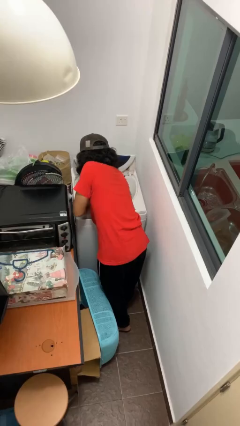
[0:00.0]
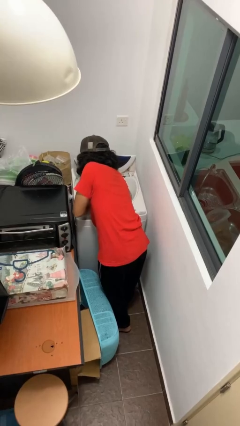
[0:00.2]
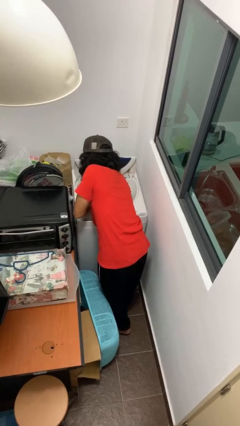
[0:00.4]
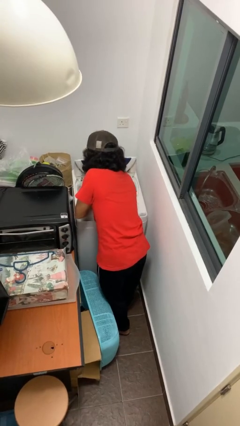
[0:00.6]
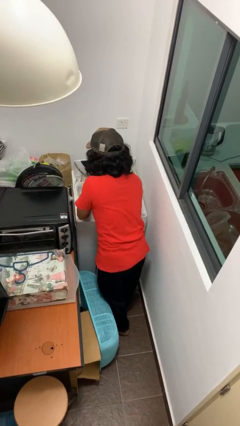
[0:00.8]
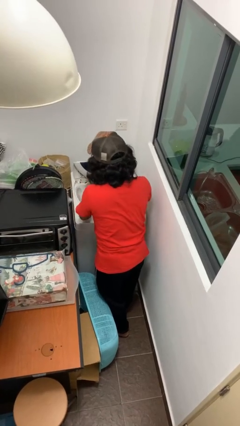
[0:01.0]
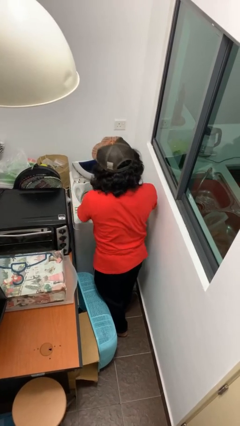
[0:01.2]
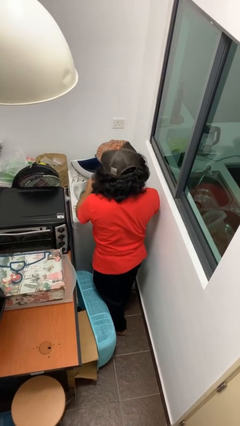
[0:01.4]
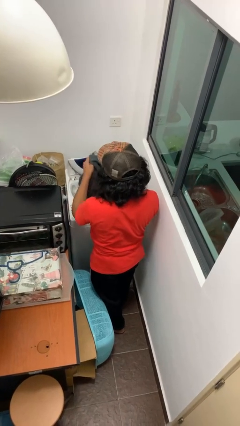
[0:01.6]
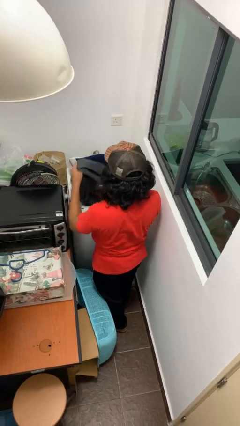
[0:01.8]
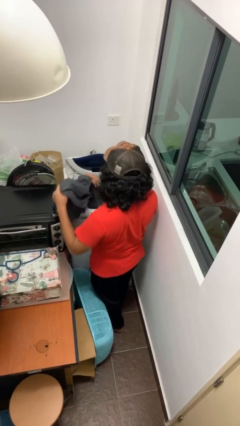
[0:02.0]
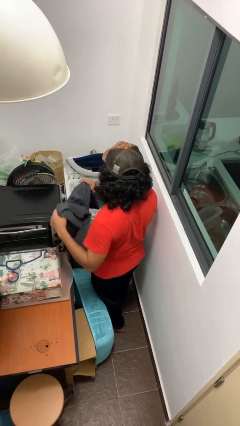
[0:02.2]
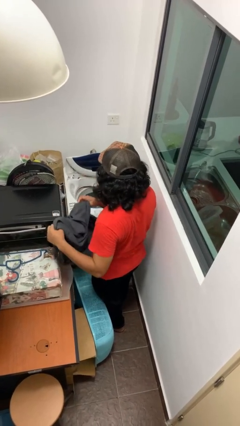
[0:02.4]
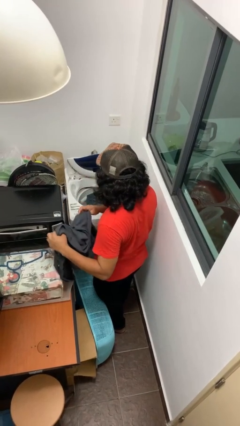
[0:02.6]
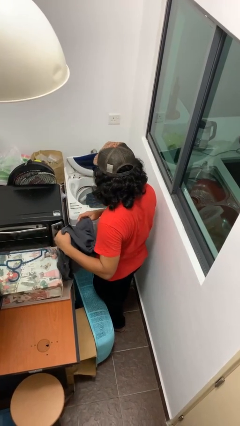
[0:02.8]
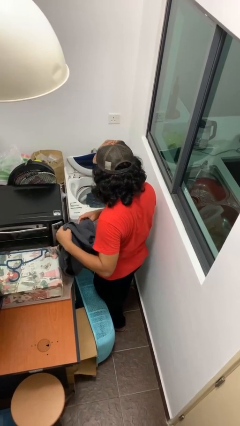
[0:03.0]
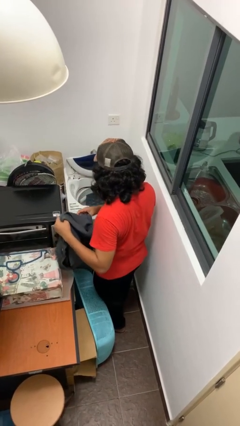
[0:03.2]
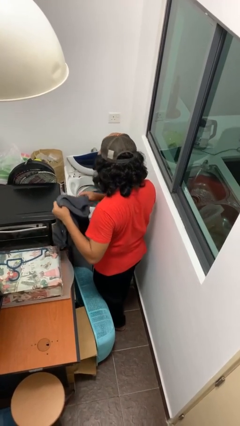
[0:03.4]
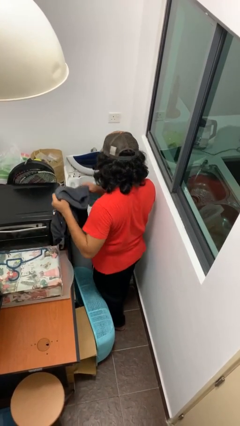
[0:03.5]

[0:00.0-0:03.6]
person unloads clotheswasher

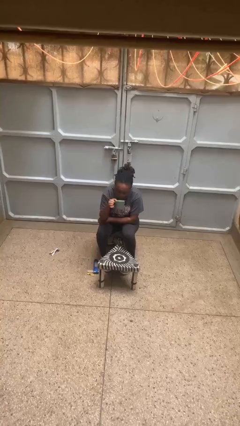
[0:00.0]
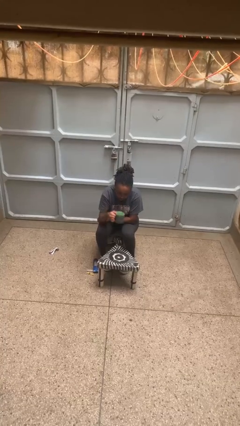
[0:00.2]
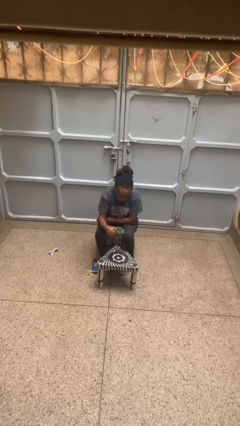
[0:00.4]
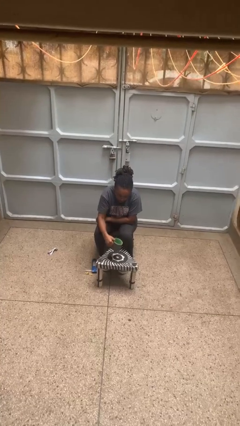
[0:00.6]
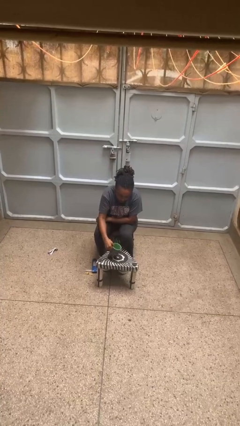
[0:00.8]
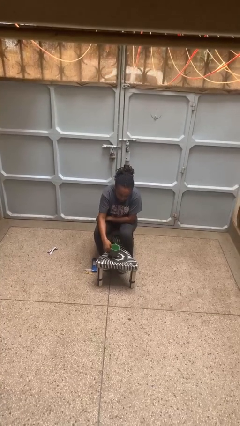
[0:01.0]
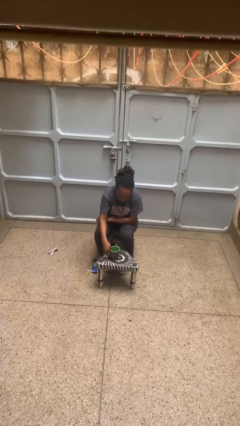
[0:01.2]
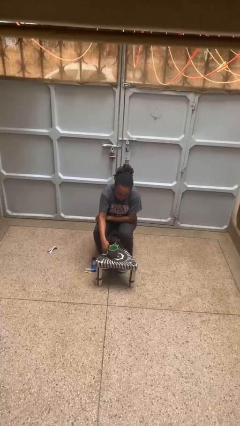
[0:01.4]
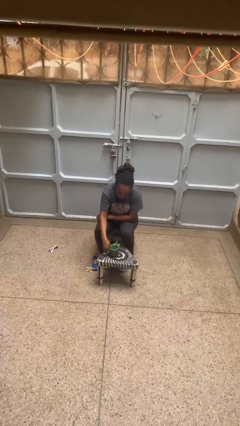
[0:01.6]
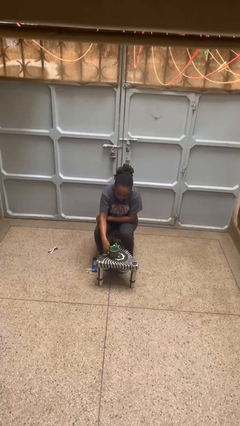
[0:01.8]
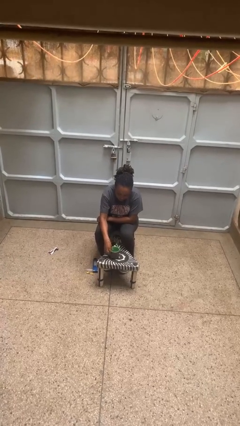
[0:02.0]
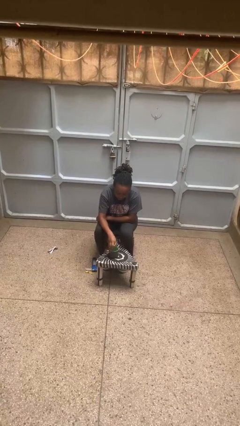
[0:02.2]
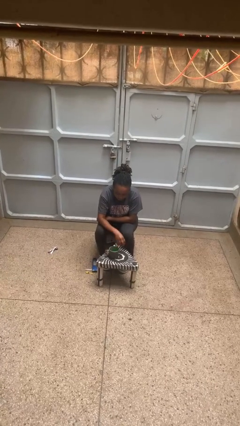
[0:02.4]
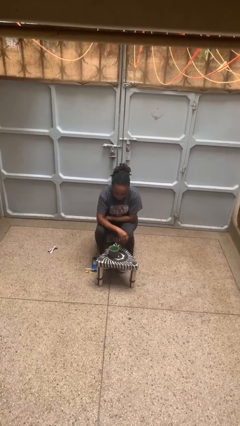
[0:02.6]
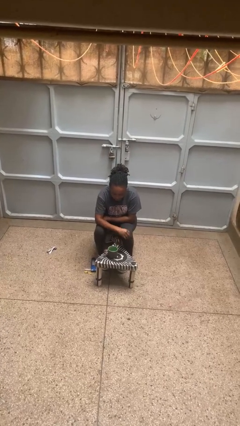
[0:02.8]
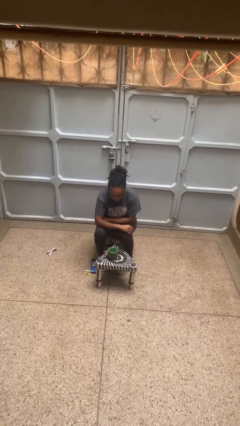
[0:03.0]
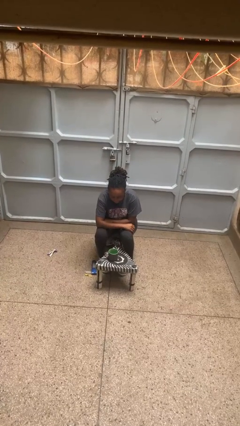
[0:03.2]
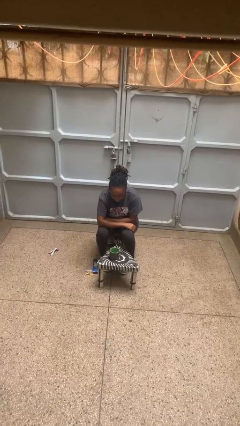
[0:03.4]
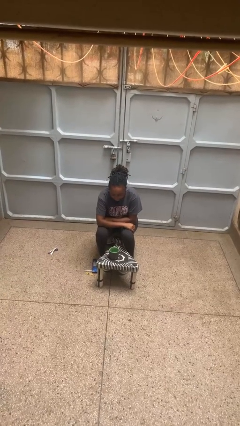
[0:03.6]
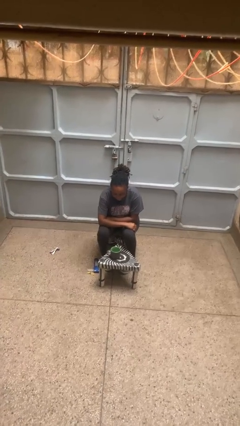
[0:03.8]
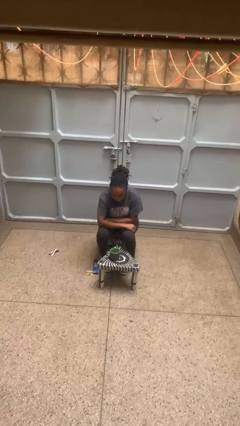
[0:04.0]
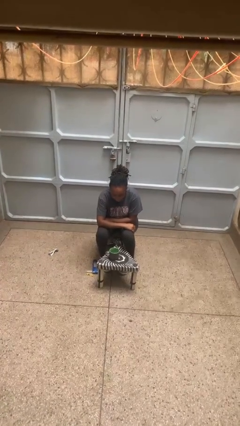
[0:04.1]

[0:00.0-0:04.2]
person puts down object on table

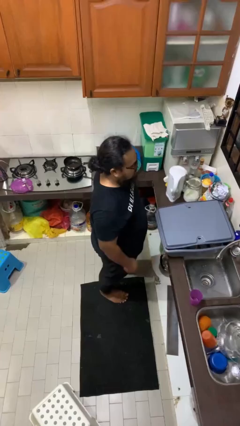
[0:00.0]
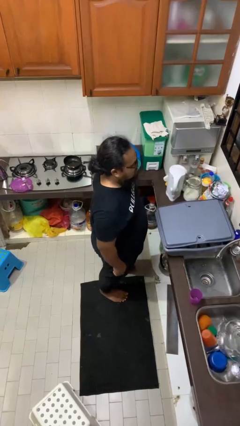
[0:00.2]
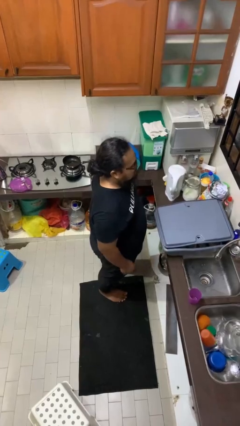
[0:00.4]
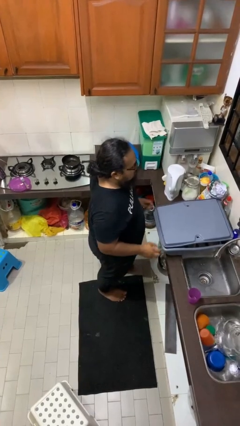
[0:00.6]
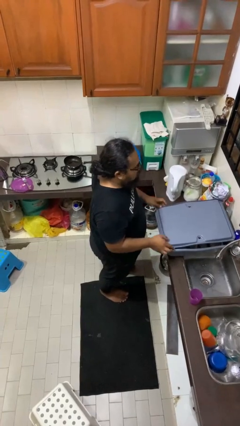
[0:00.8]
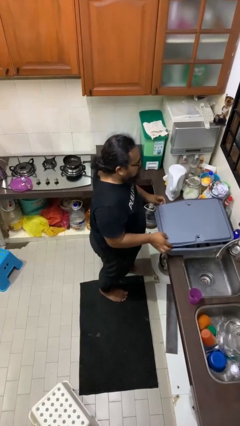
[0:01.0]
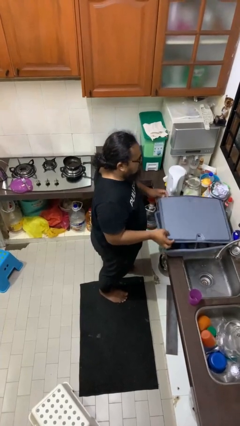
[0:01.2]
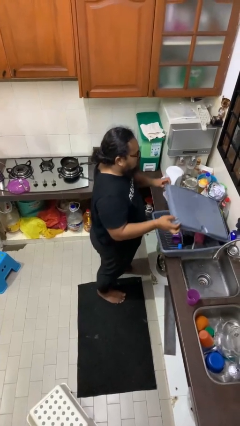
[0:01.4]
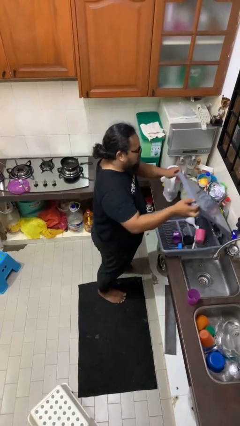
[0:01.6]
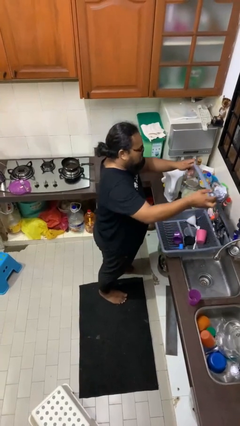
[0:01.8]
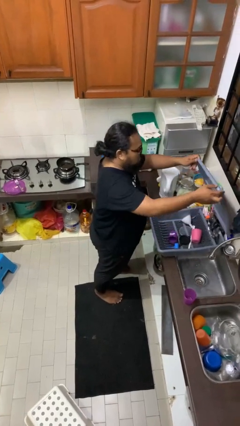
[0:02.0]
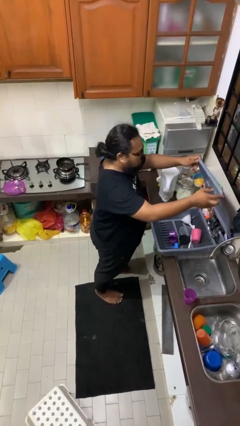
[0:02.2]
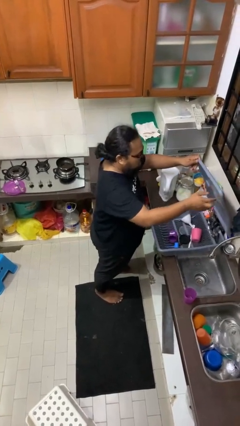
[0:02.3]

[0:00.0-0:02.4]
person opens dishwasher

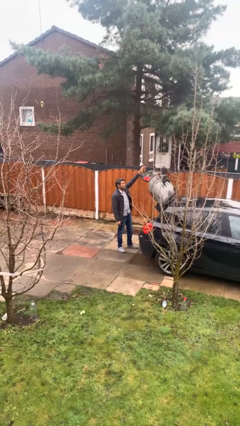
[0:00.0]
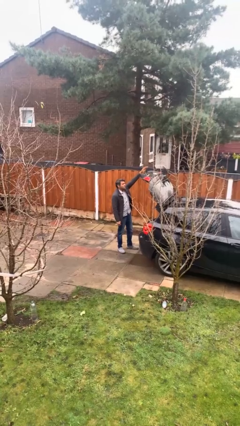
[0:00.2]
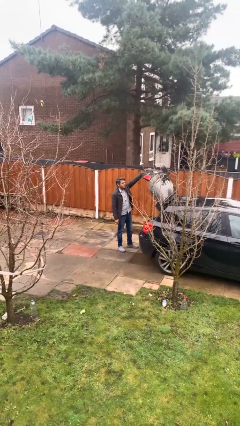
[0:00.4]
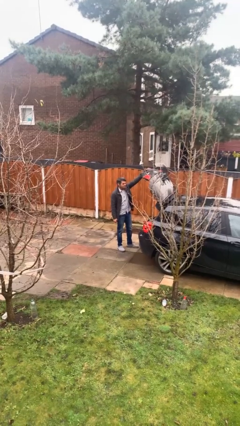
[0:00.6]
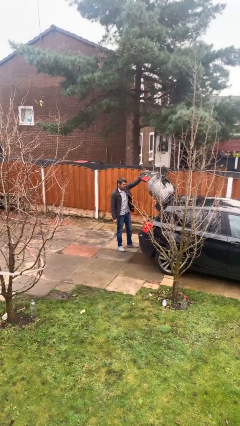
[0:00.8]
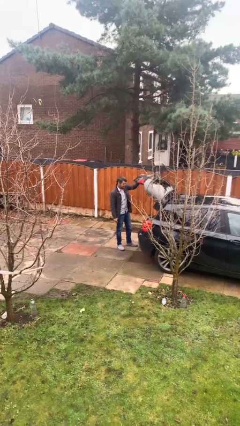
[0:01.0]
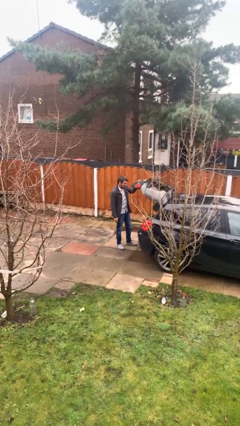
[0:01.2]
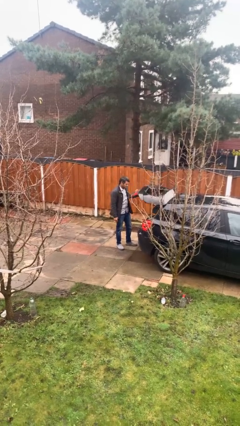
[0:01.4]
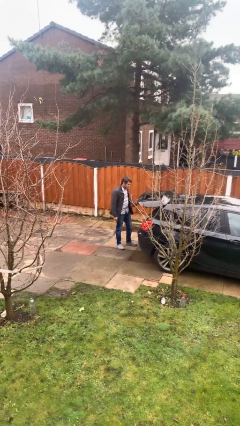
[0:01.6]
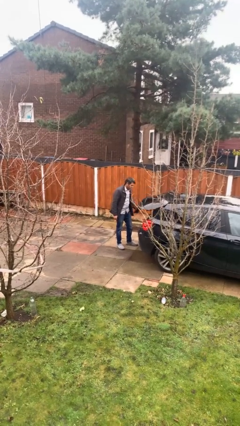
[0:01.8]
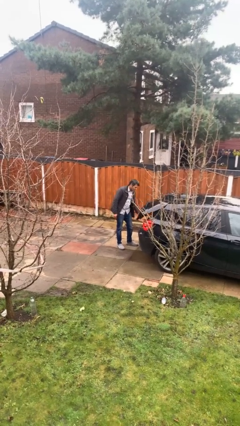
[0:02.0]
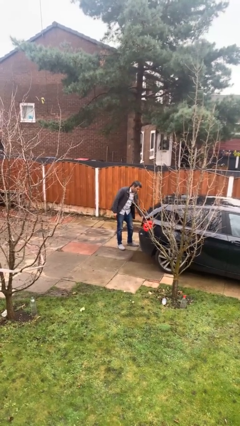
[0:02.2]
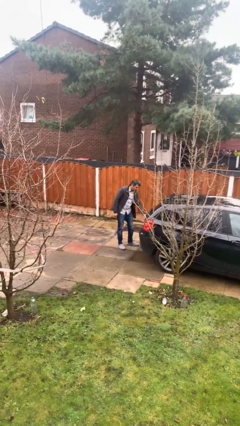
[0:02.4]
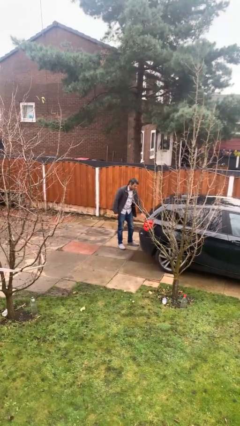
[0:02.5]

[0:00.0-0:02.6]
person closes car trunk

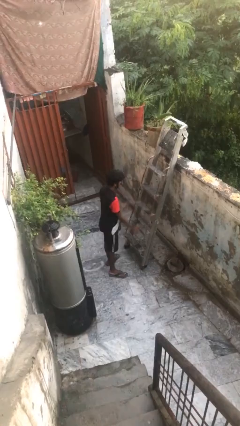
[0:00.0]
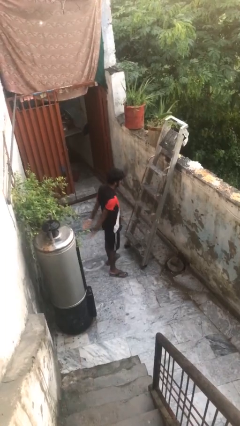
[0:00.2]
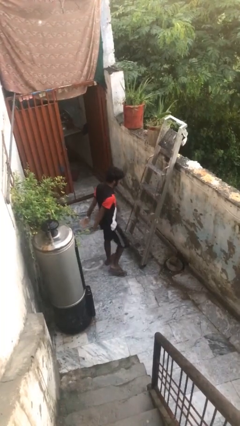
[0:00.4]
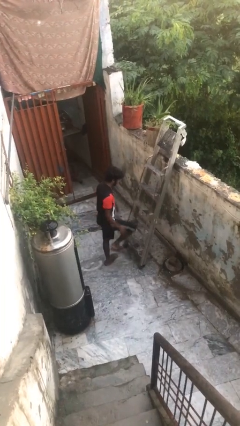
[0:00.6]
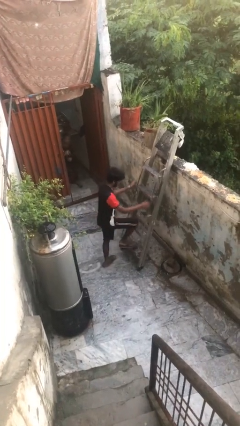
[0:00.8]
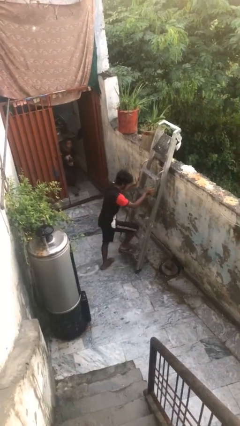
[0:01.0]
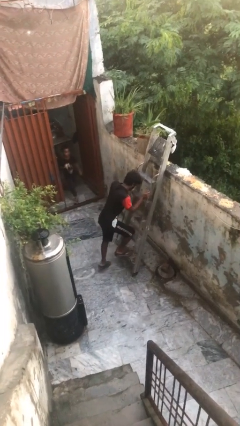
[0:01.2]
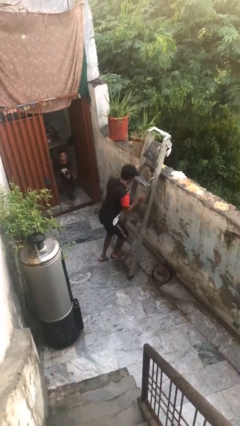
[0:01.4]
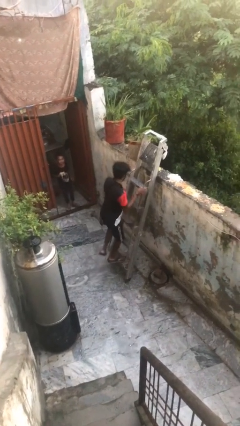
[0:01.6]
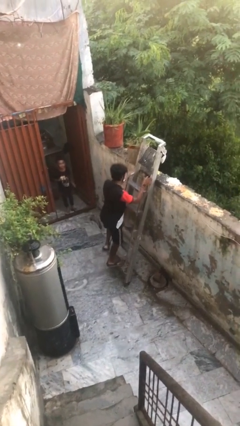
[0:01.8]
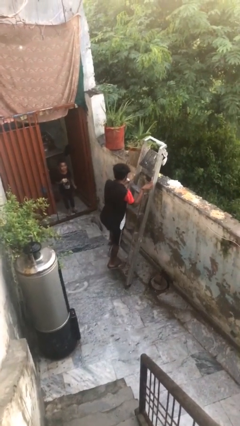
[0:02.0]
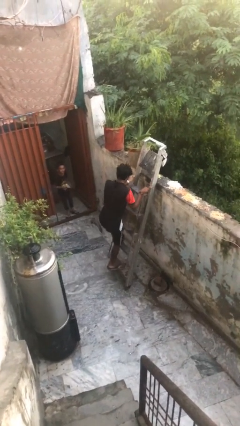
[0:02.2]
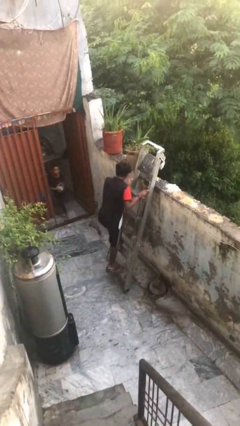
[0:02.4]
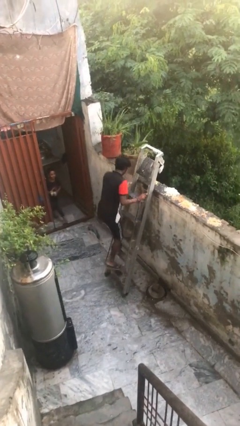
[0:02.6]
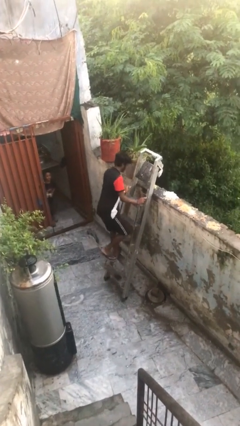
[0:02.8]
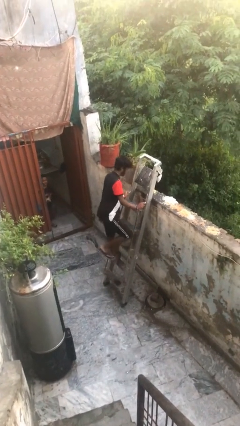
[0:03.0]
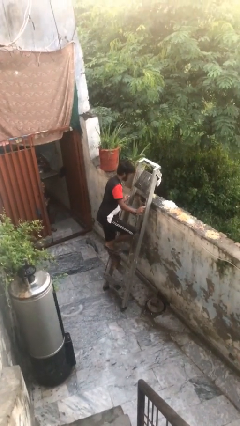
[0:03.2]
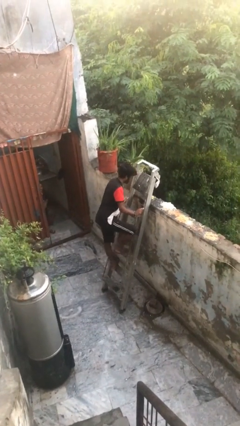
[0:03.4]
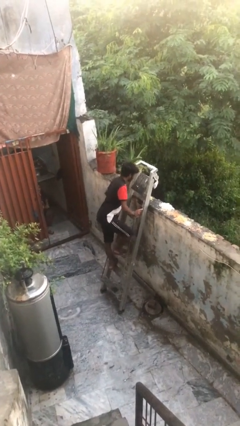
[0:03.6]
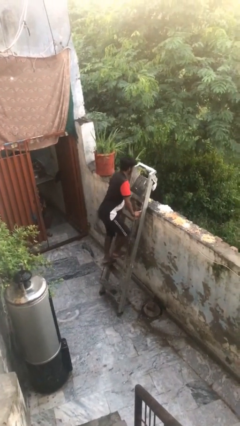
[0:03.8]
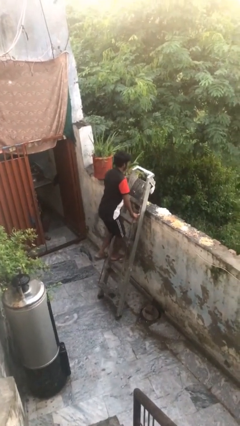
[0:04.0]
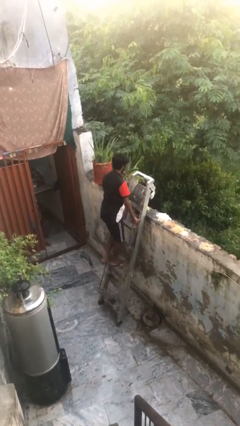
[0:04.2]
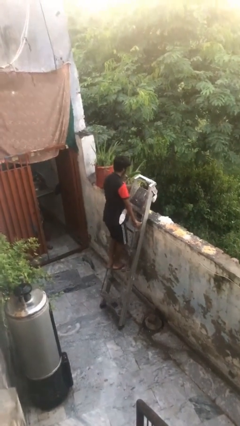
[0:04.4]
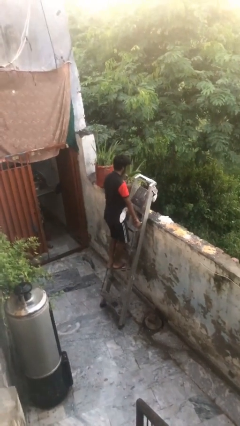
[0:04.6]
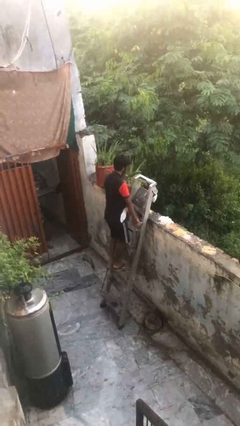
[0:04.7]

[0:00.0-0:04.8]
person climbs up ladder
